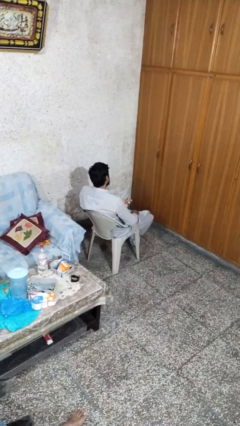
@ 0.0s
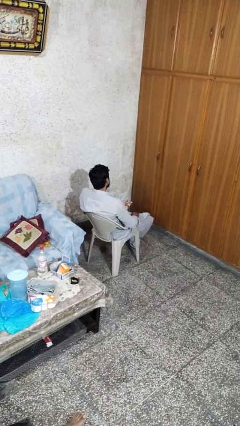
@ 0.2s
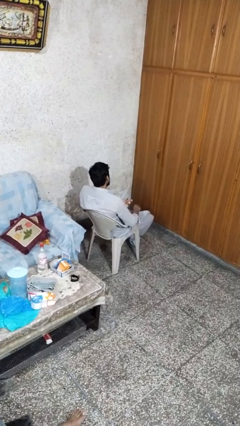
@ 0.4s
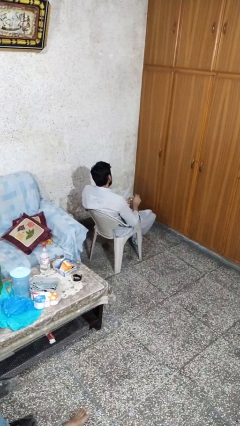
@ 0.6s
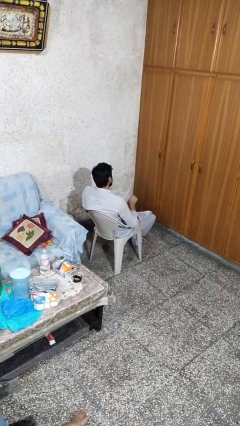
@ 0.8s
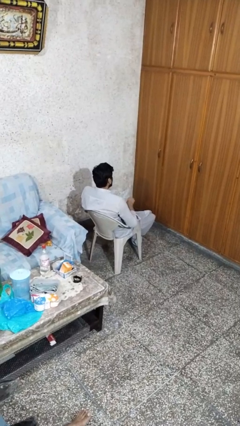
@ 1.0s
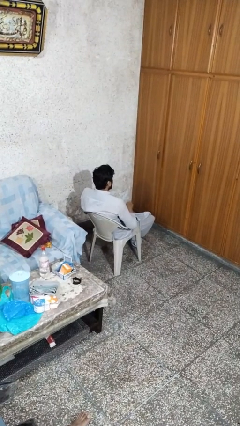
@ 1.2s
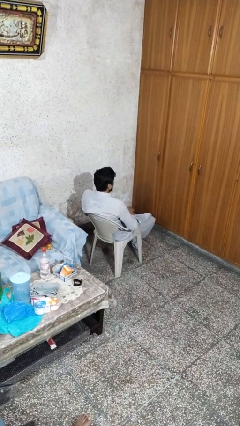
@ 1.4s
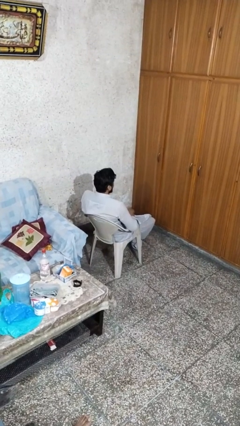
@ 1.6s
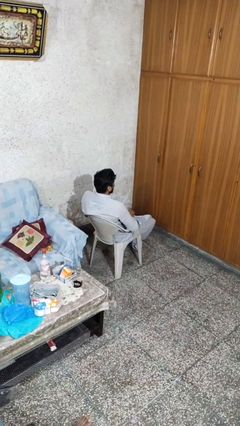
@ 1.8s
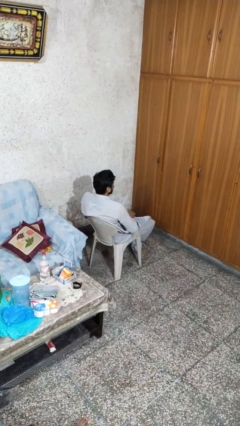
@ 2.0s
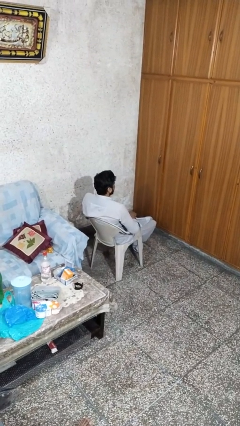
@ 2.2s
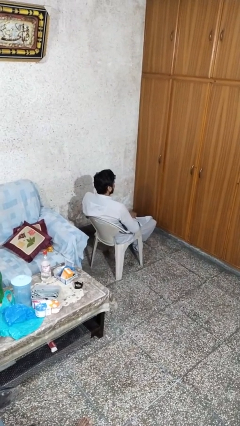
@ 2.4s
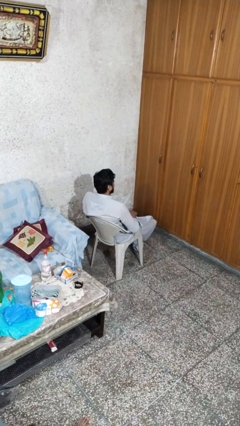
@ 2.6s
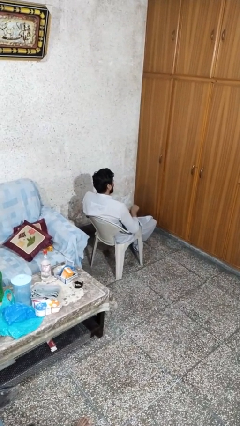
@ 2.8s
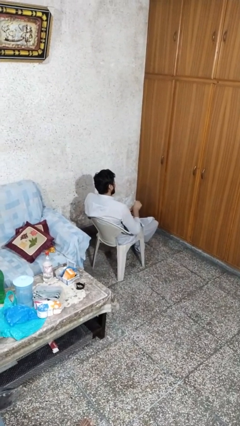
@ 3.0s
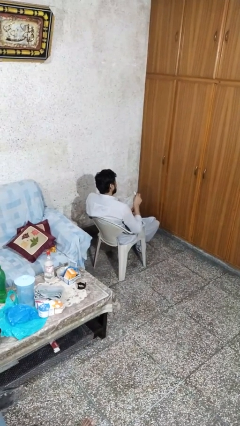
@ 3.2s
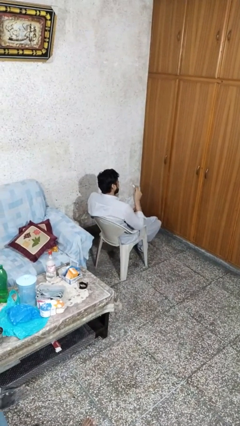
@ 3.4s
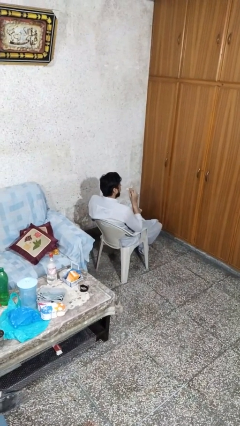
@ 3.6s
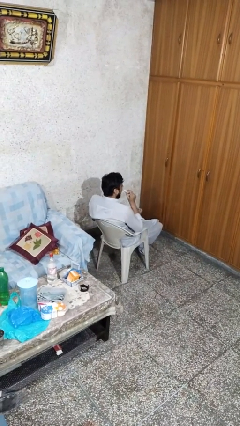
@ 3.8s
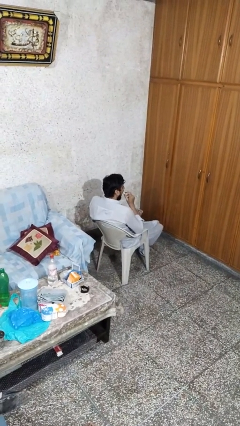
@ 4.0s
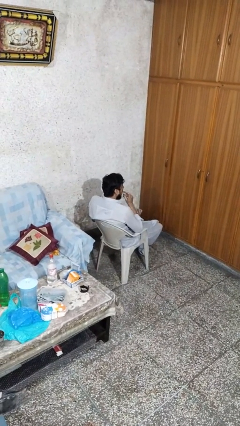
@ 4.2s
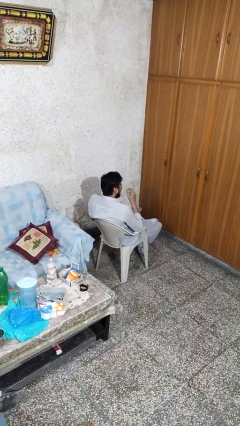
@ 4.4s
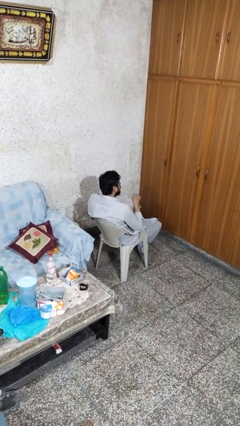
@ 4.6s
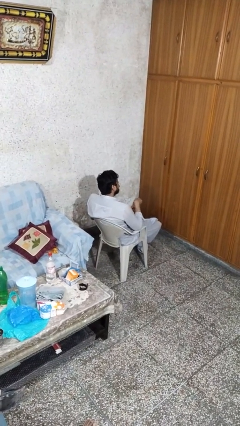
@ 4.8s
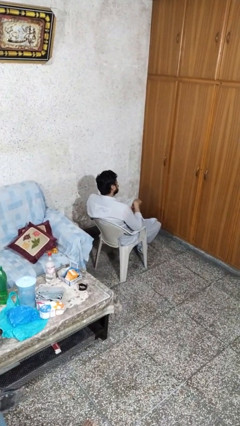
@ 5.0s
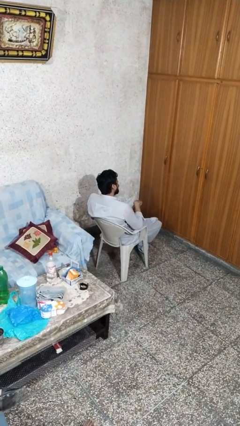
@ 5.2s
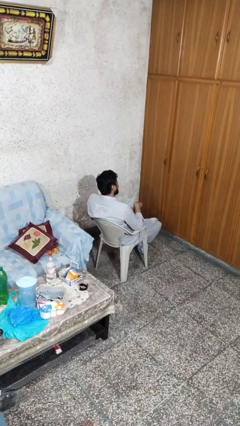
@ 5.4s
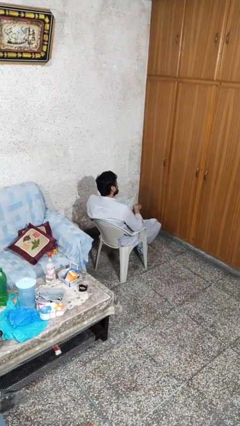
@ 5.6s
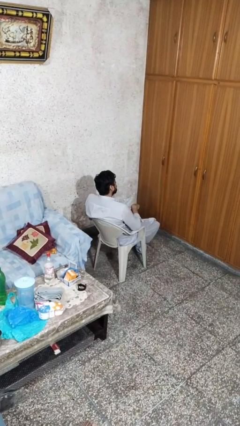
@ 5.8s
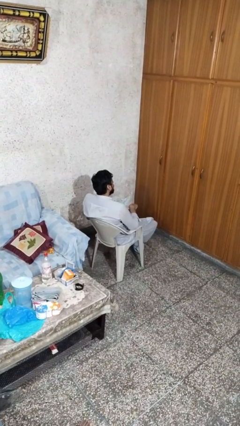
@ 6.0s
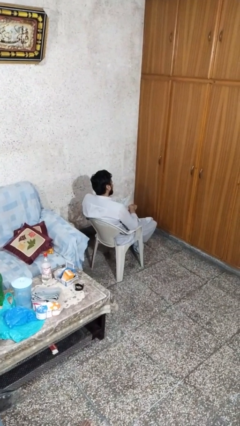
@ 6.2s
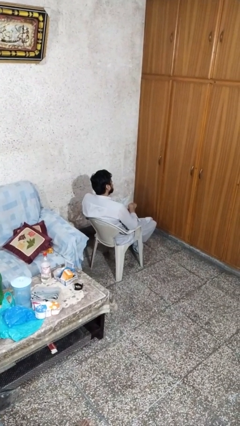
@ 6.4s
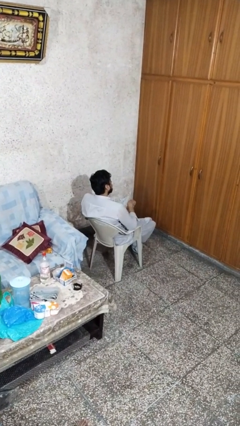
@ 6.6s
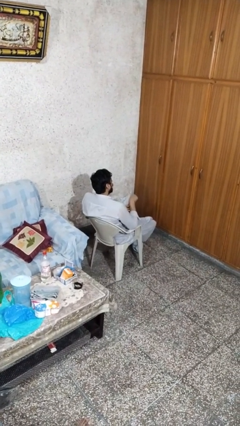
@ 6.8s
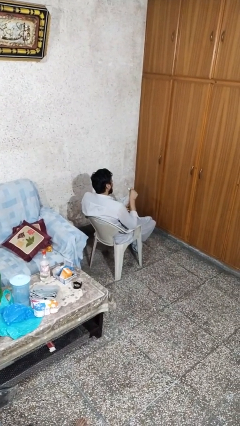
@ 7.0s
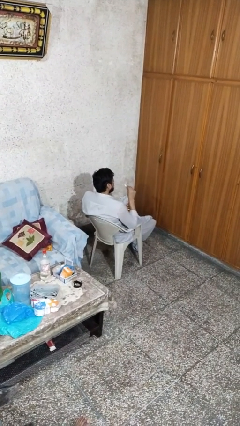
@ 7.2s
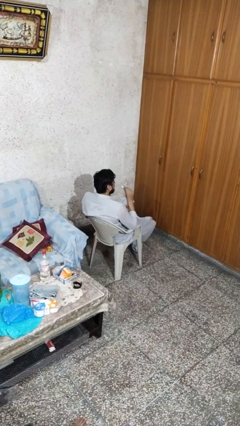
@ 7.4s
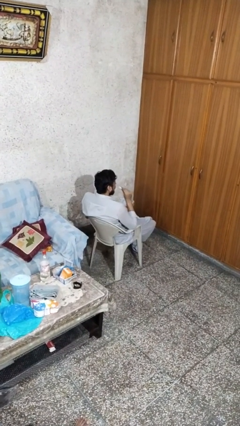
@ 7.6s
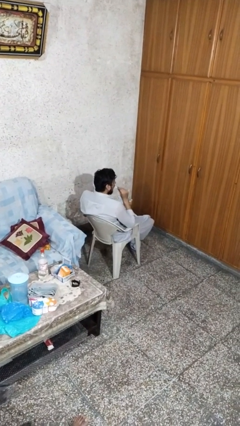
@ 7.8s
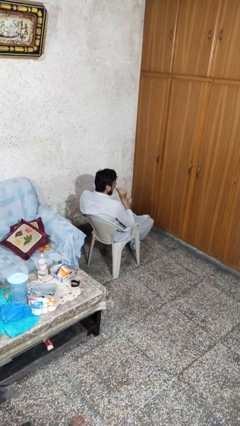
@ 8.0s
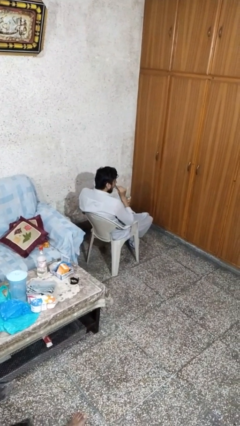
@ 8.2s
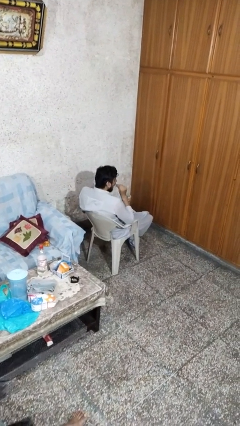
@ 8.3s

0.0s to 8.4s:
person eats snack from bag

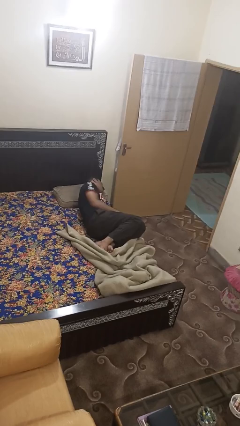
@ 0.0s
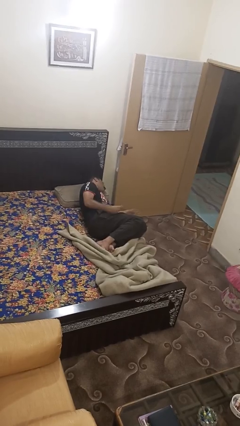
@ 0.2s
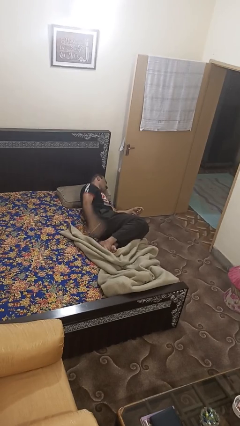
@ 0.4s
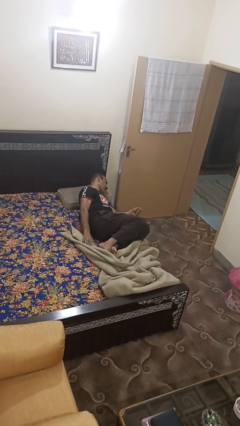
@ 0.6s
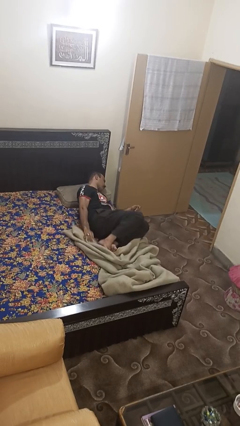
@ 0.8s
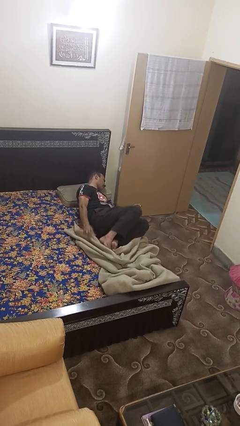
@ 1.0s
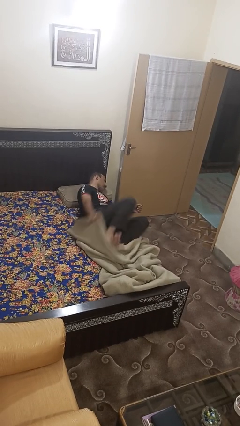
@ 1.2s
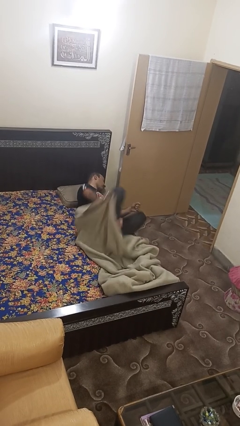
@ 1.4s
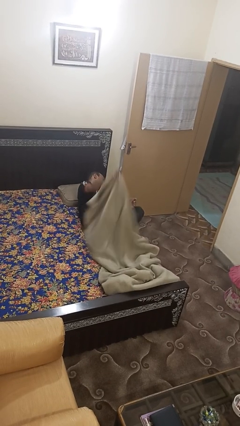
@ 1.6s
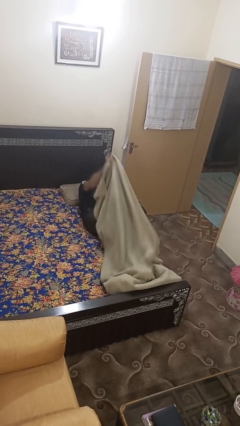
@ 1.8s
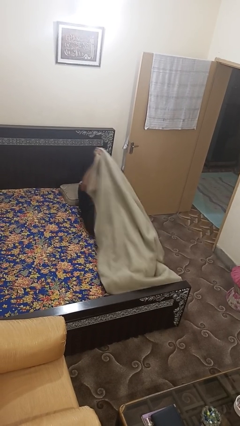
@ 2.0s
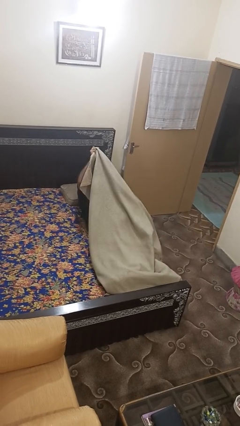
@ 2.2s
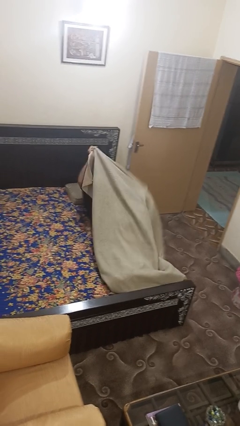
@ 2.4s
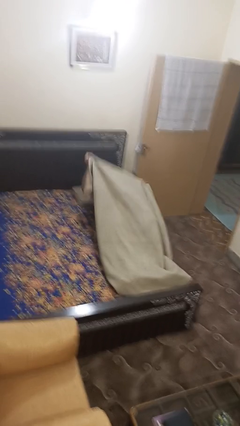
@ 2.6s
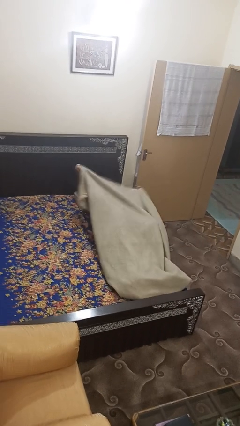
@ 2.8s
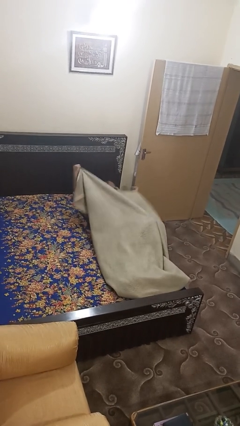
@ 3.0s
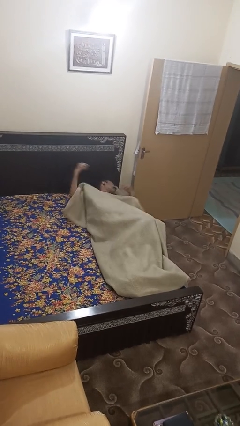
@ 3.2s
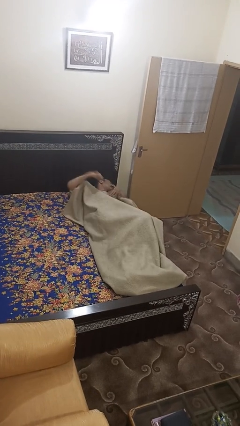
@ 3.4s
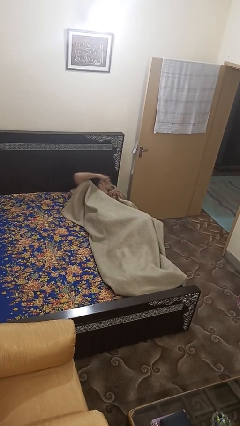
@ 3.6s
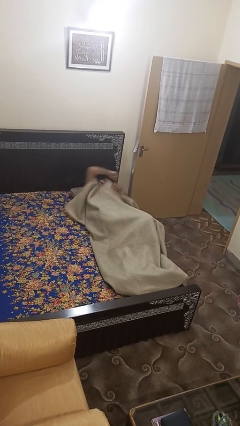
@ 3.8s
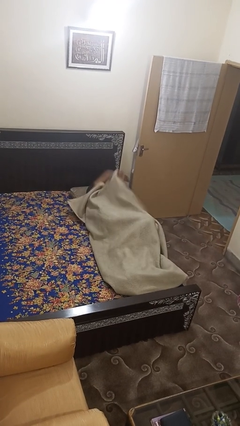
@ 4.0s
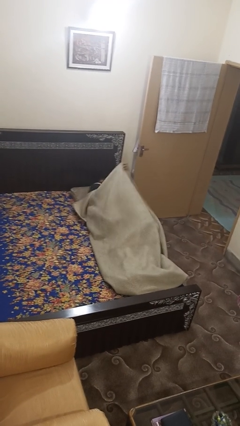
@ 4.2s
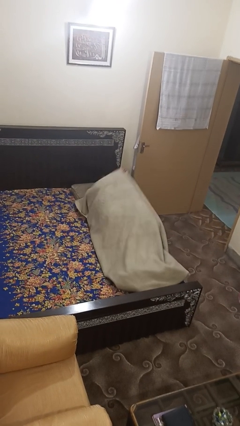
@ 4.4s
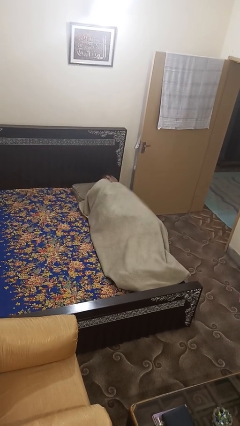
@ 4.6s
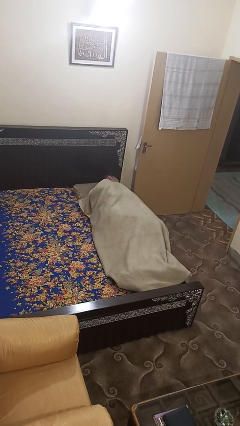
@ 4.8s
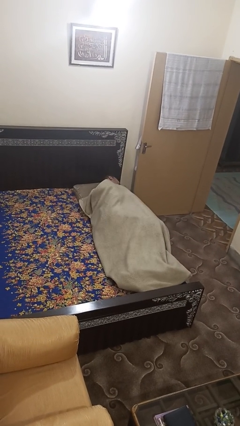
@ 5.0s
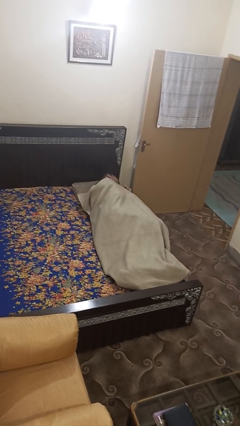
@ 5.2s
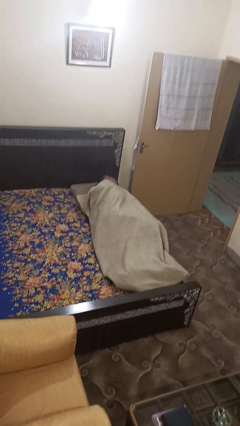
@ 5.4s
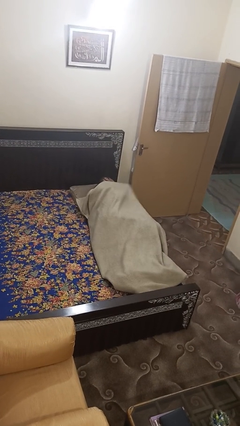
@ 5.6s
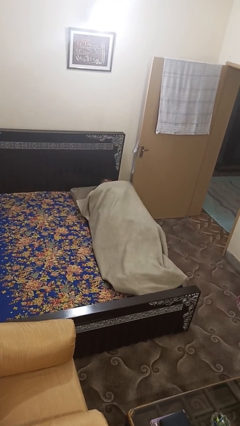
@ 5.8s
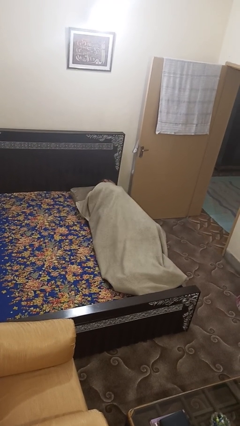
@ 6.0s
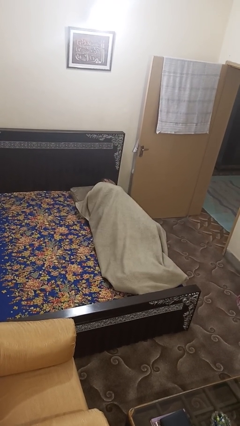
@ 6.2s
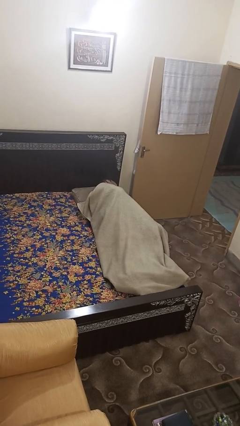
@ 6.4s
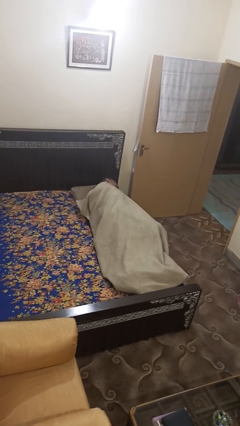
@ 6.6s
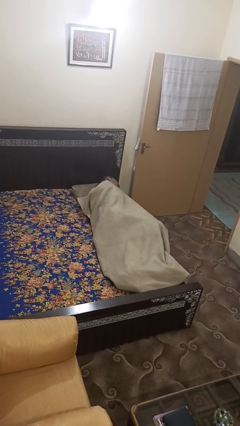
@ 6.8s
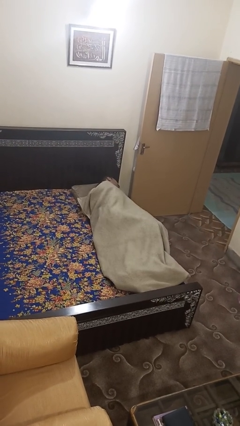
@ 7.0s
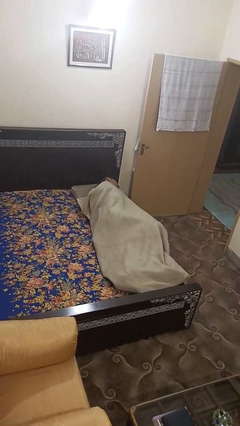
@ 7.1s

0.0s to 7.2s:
person covers with bedsheets

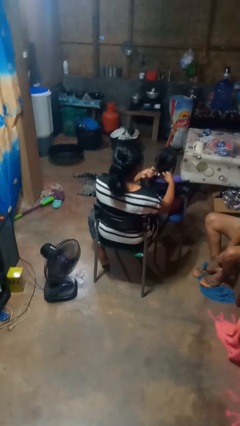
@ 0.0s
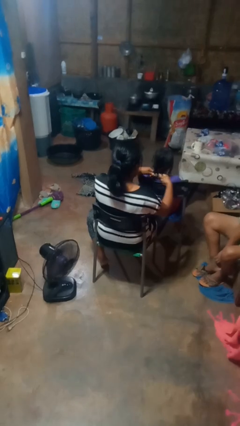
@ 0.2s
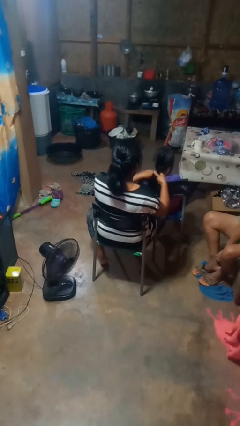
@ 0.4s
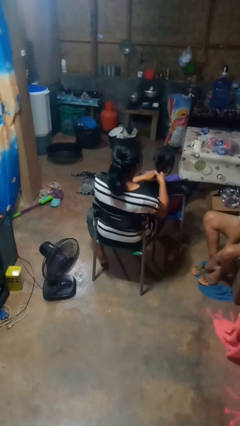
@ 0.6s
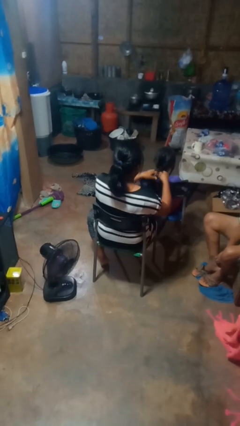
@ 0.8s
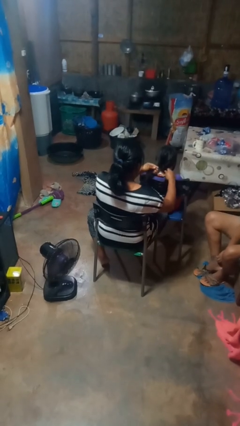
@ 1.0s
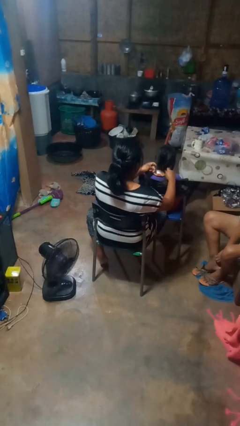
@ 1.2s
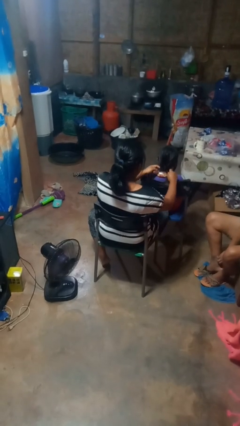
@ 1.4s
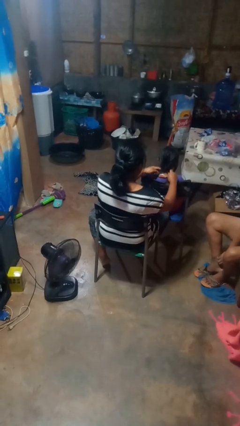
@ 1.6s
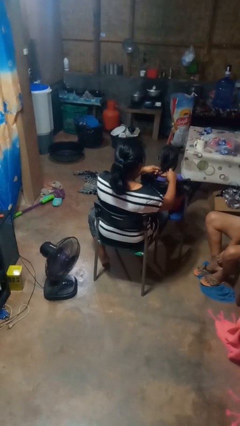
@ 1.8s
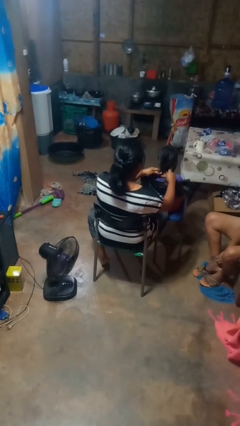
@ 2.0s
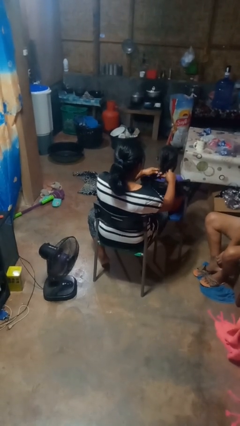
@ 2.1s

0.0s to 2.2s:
person braids hair of person
